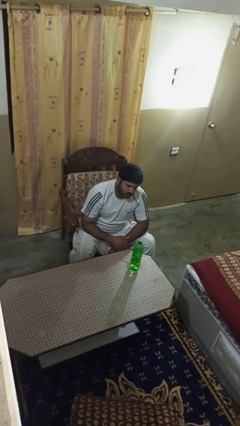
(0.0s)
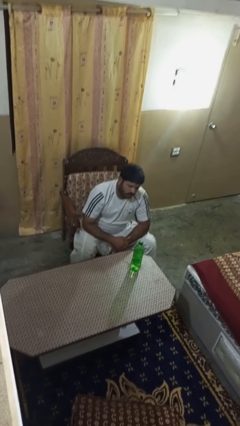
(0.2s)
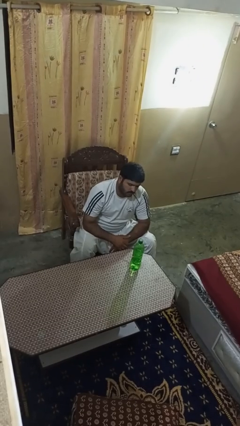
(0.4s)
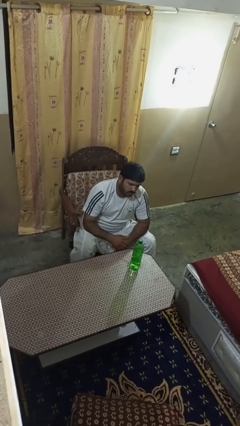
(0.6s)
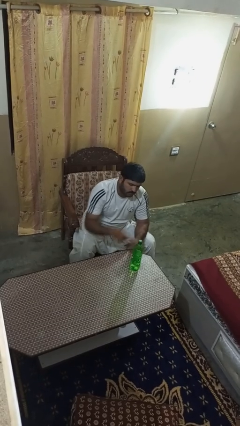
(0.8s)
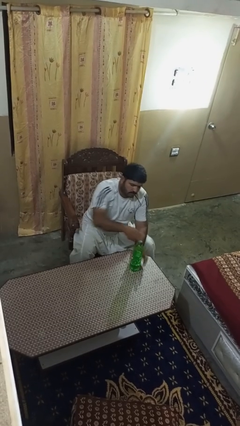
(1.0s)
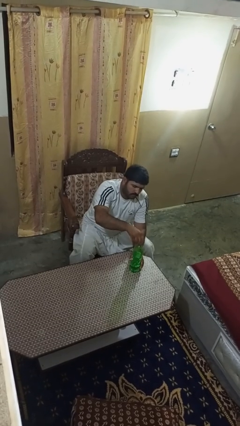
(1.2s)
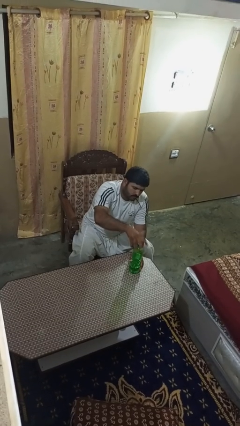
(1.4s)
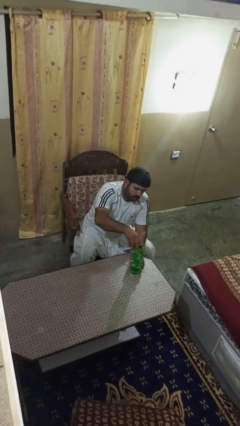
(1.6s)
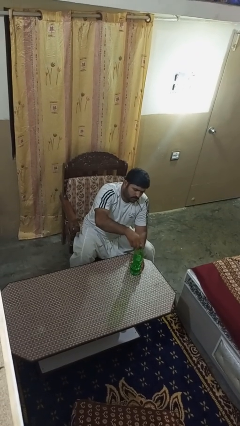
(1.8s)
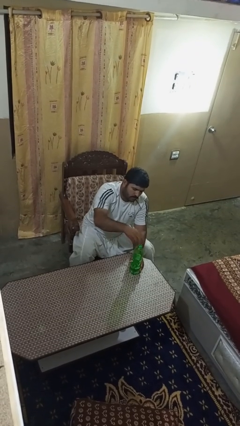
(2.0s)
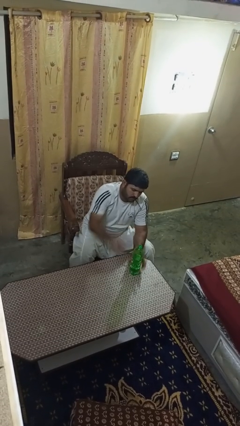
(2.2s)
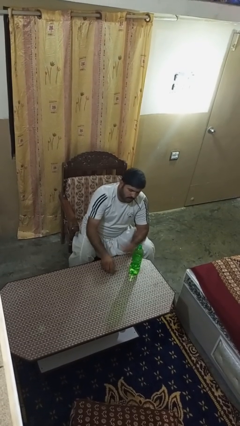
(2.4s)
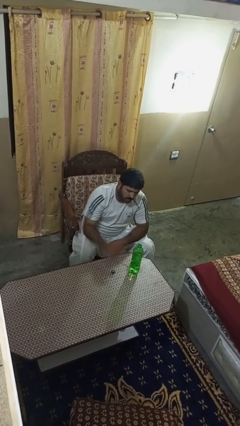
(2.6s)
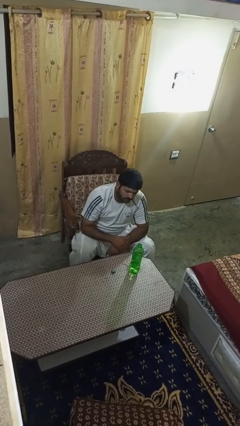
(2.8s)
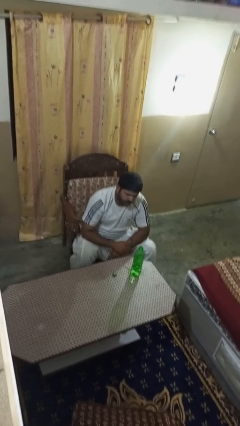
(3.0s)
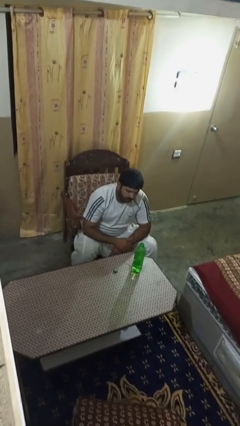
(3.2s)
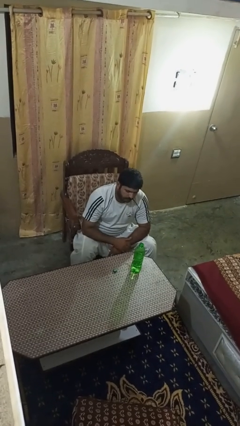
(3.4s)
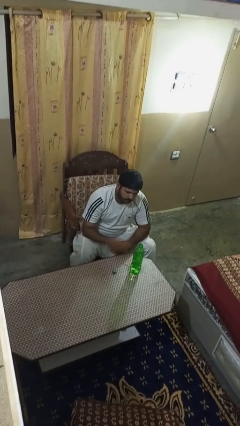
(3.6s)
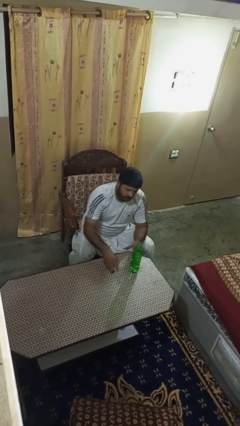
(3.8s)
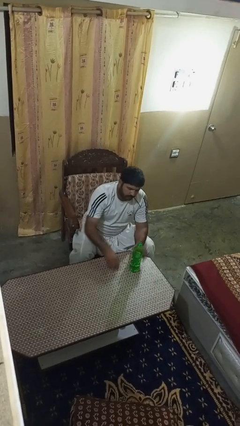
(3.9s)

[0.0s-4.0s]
person unscrews lid from bottle

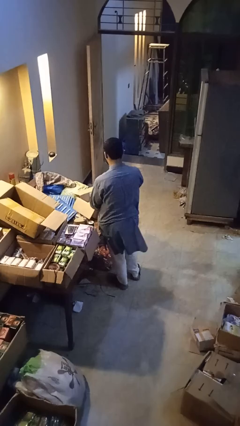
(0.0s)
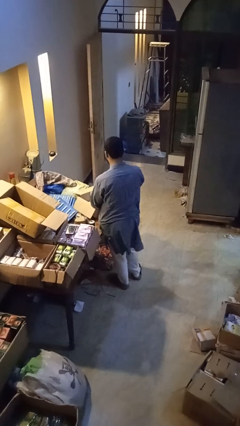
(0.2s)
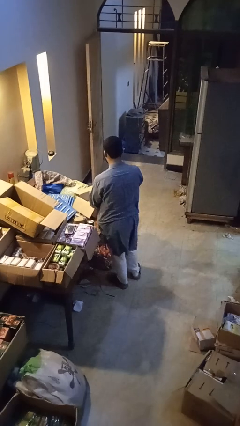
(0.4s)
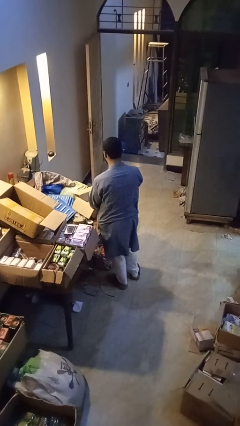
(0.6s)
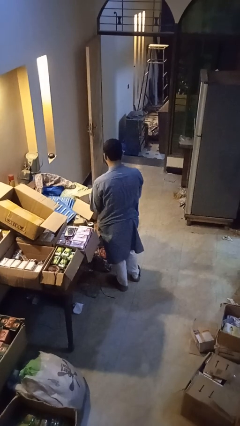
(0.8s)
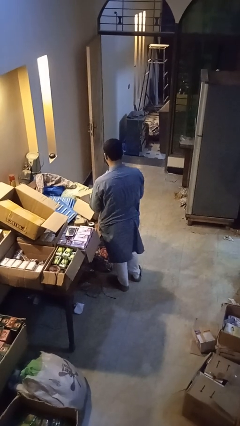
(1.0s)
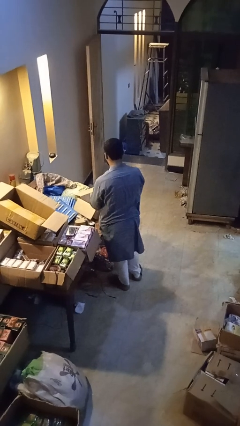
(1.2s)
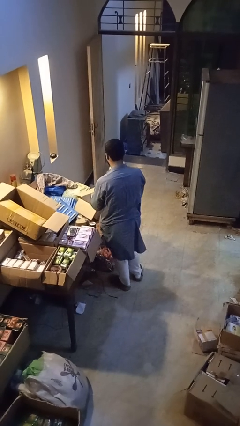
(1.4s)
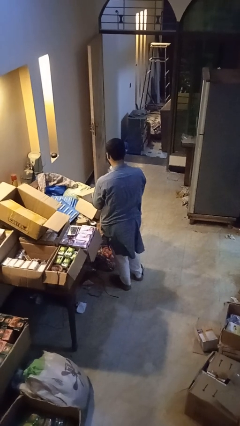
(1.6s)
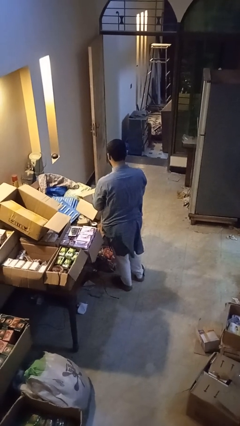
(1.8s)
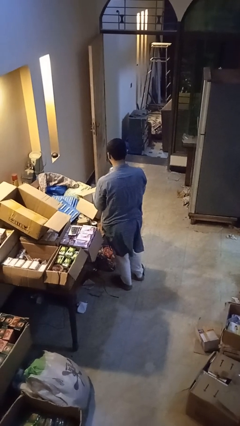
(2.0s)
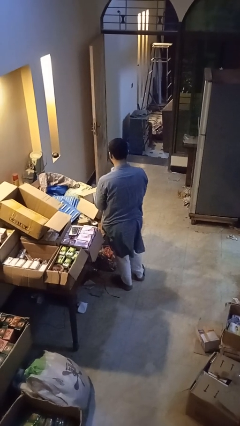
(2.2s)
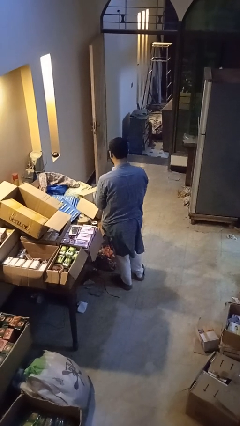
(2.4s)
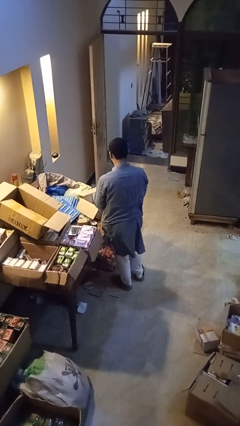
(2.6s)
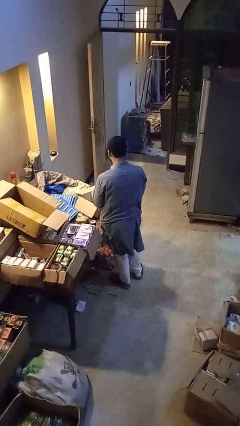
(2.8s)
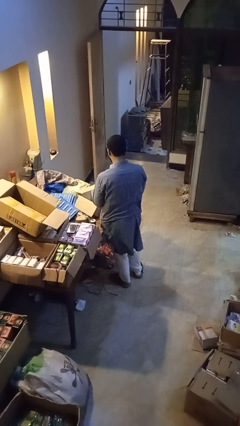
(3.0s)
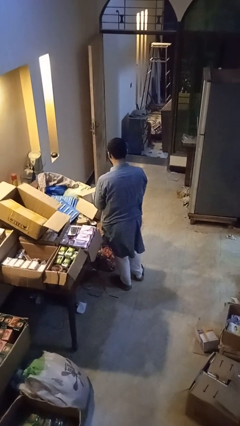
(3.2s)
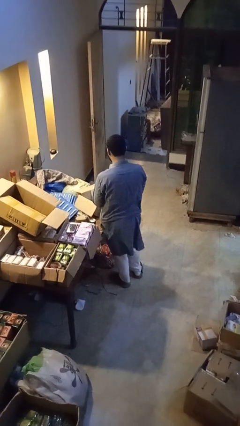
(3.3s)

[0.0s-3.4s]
person takes object from box

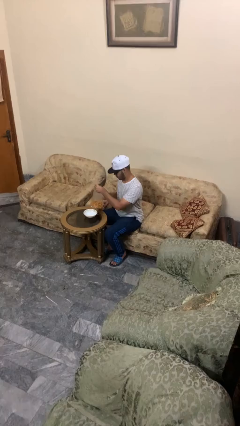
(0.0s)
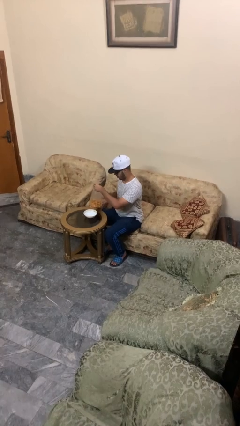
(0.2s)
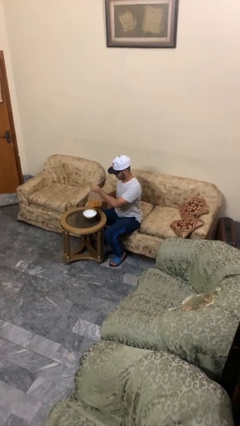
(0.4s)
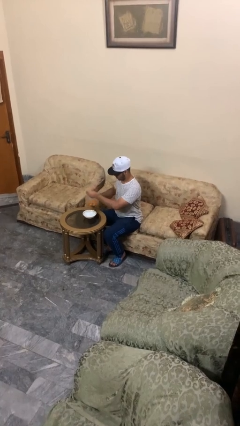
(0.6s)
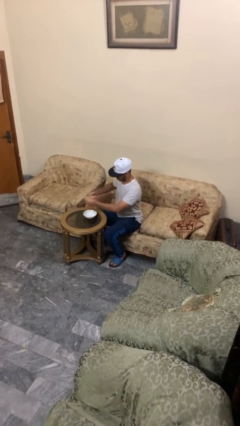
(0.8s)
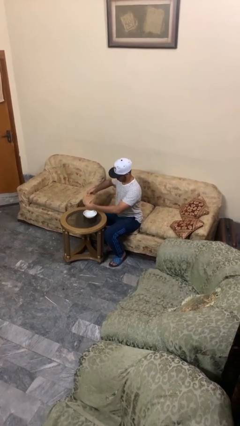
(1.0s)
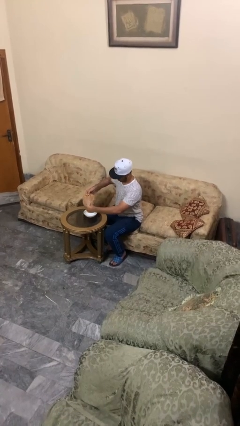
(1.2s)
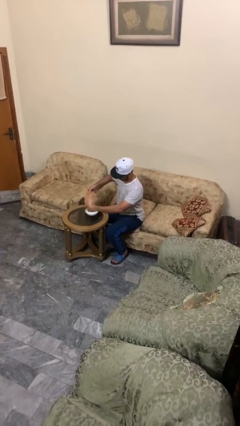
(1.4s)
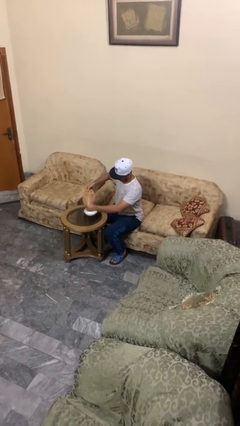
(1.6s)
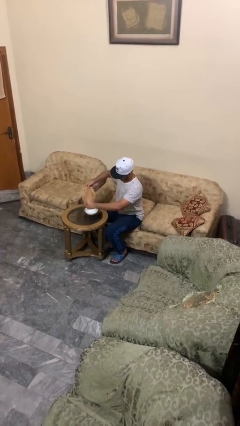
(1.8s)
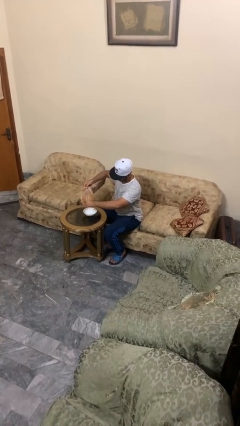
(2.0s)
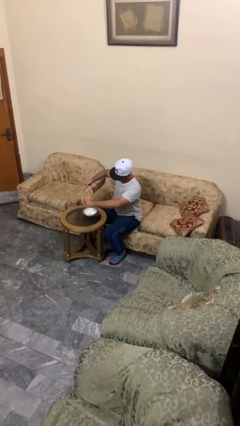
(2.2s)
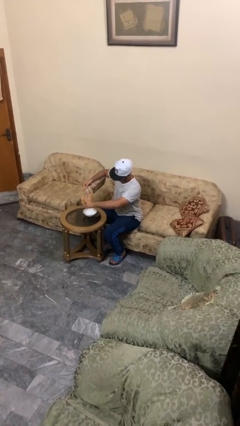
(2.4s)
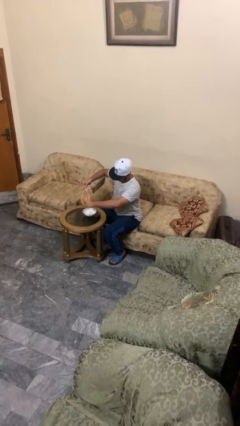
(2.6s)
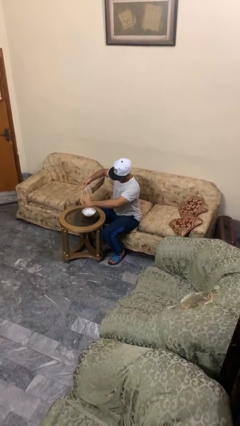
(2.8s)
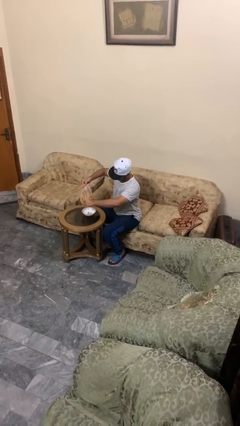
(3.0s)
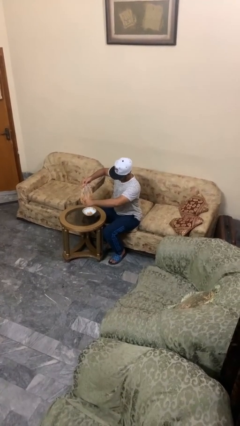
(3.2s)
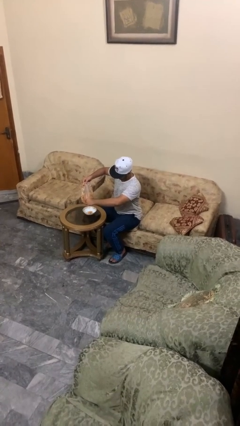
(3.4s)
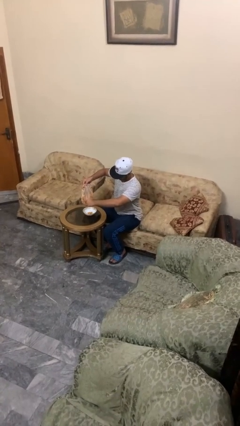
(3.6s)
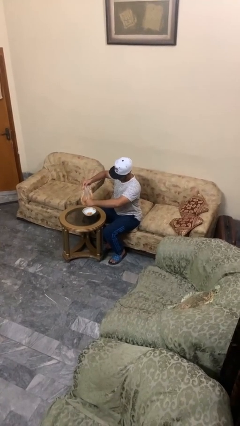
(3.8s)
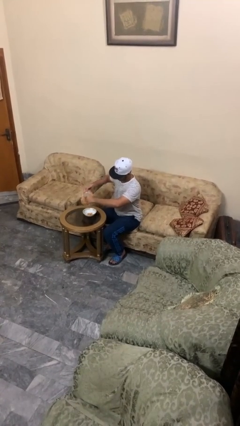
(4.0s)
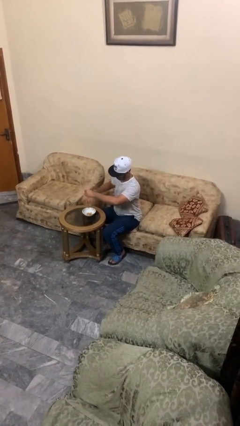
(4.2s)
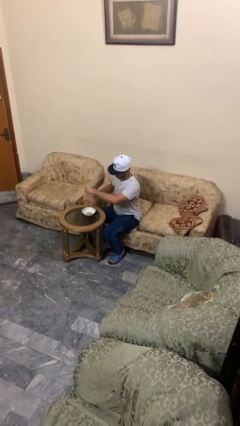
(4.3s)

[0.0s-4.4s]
person pours into bowl

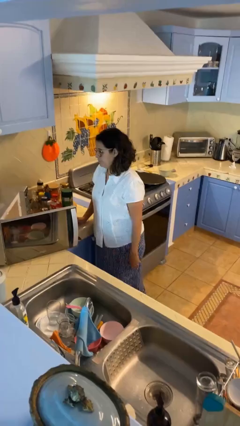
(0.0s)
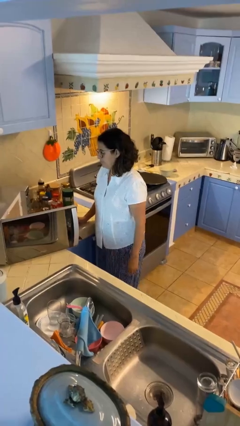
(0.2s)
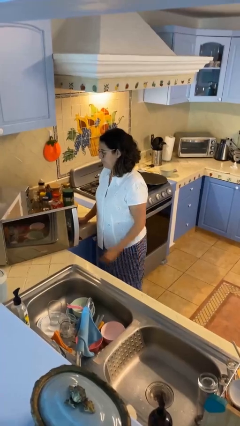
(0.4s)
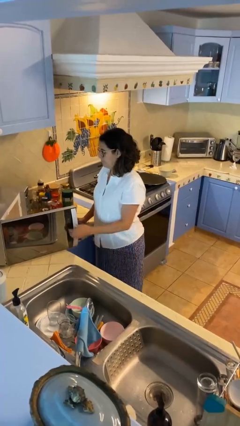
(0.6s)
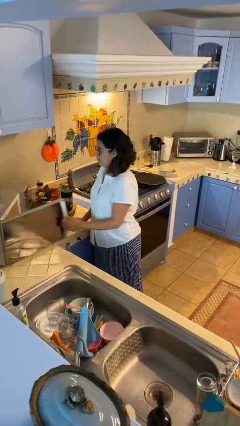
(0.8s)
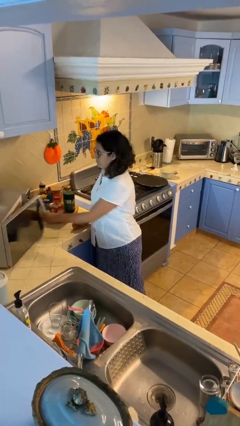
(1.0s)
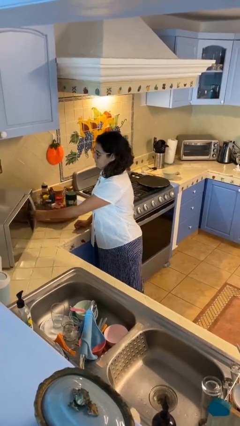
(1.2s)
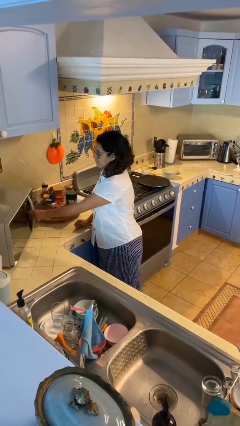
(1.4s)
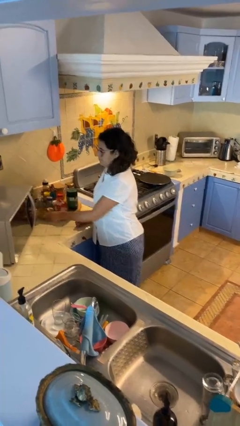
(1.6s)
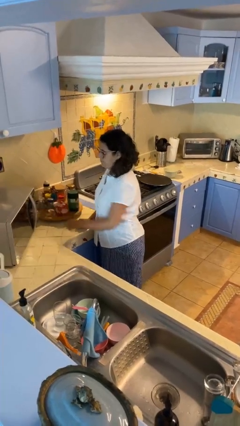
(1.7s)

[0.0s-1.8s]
person closes microwave

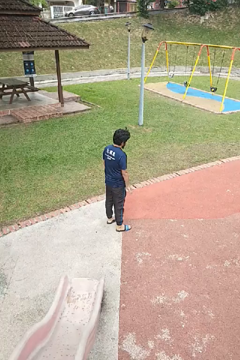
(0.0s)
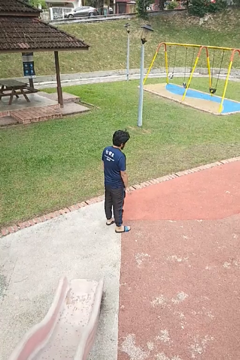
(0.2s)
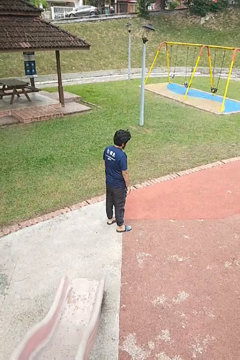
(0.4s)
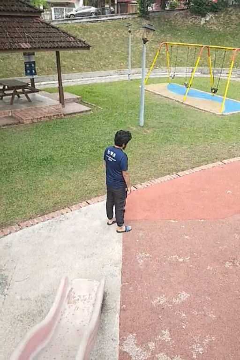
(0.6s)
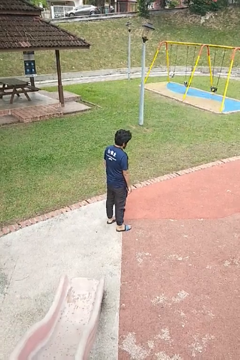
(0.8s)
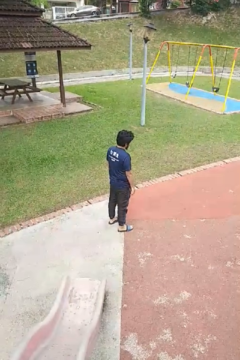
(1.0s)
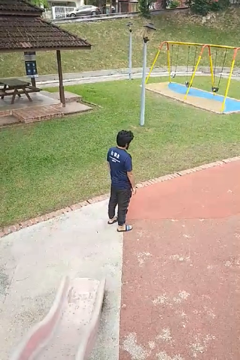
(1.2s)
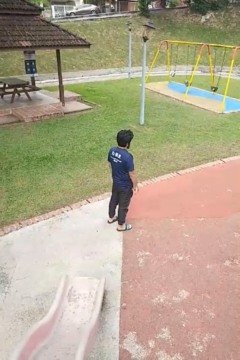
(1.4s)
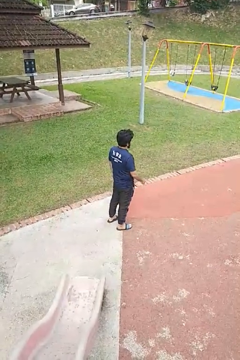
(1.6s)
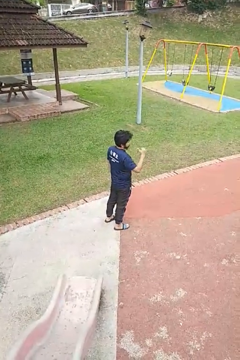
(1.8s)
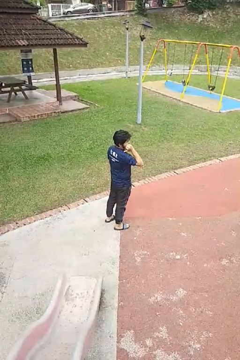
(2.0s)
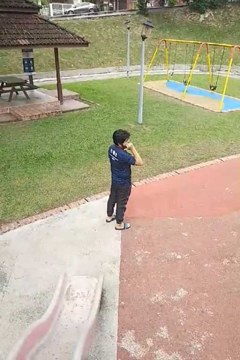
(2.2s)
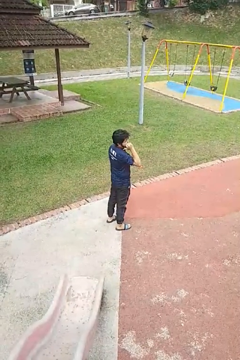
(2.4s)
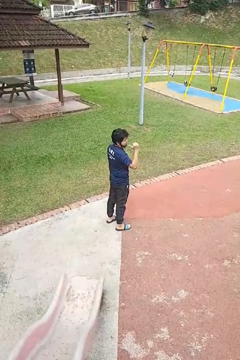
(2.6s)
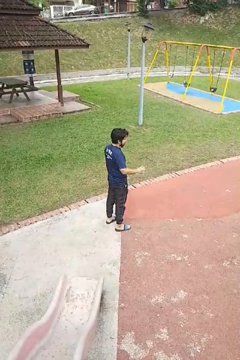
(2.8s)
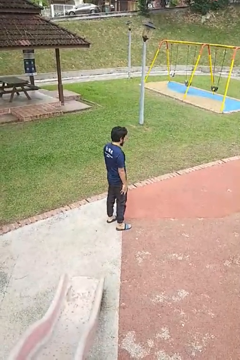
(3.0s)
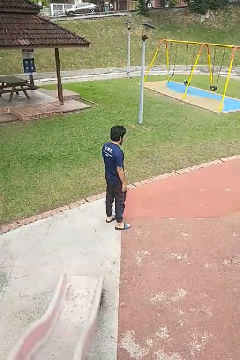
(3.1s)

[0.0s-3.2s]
person gestures behind me

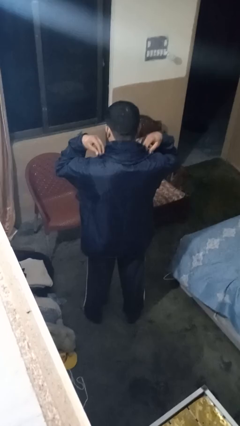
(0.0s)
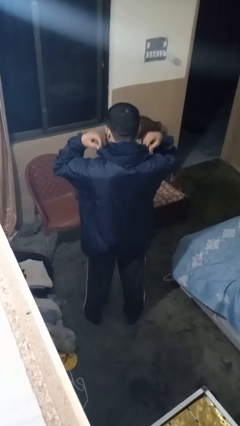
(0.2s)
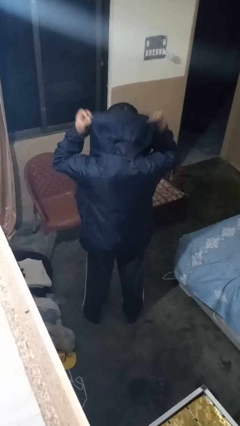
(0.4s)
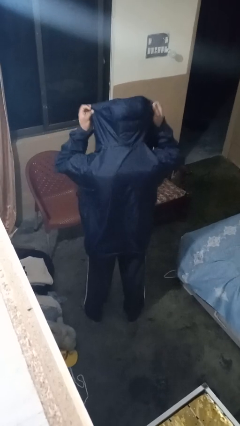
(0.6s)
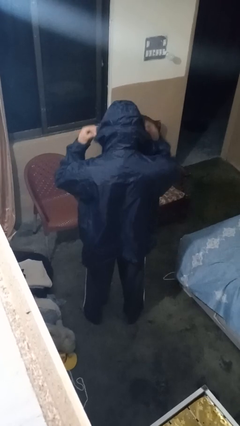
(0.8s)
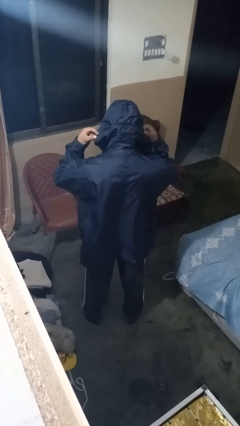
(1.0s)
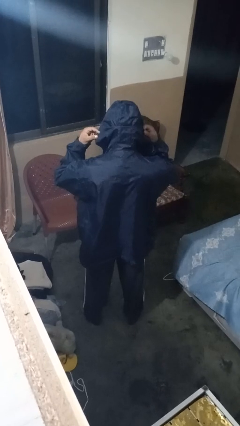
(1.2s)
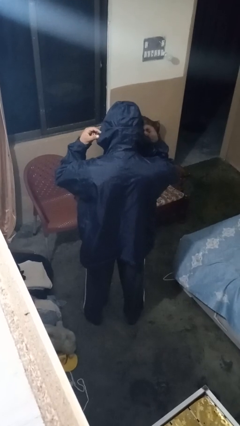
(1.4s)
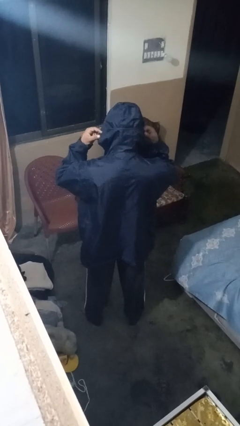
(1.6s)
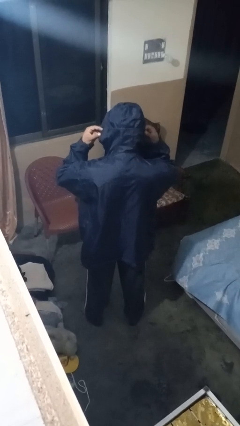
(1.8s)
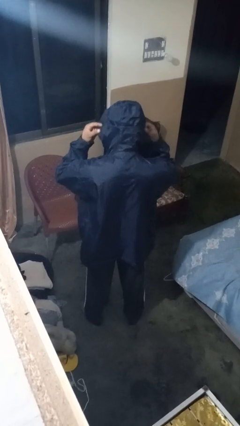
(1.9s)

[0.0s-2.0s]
person puts on hoodie
